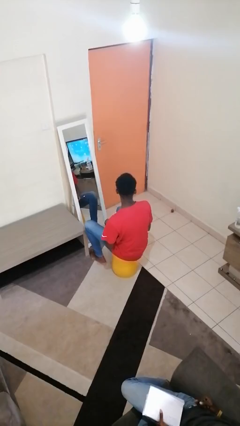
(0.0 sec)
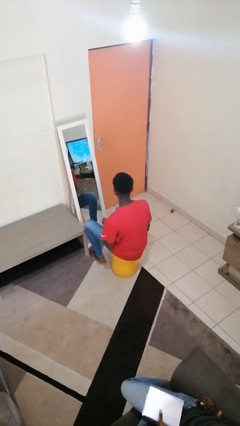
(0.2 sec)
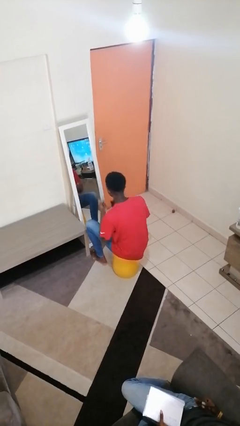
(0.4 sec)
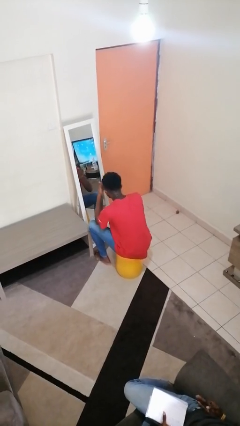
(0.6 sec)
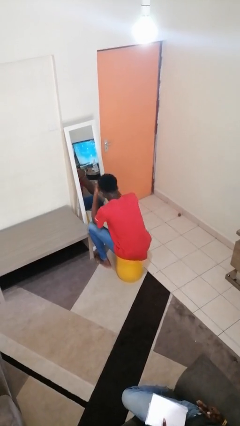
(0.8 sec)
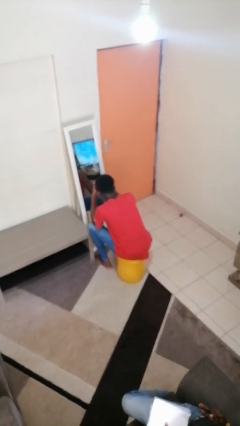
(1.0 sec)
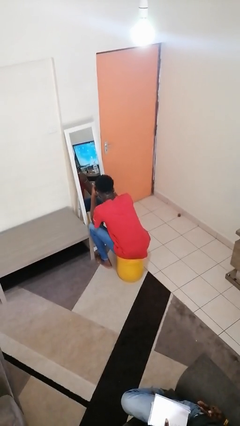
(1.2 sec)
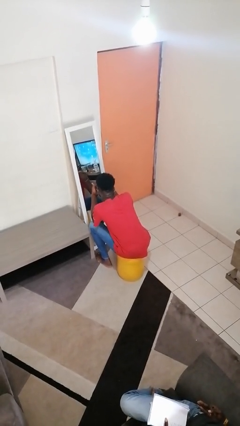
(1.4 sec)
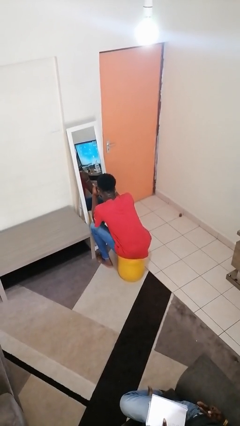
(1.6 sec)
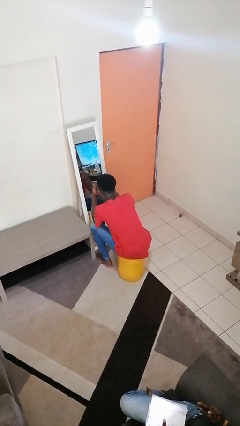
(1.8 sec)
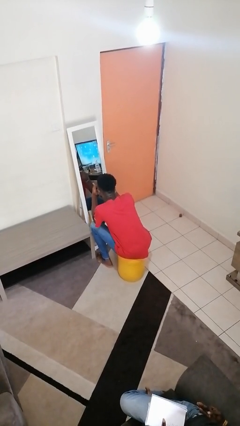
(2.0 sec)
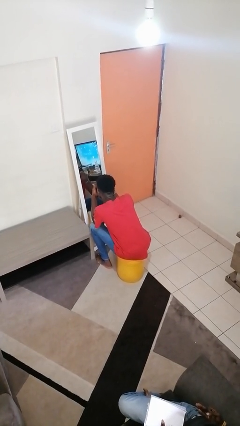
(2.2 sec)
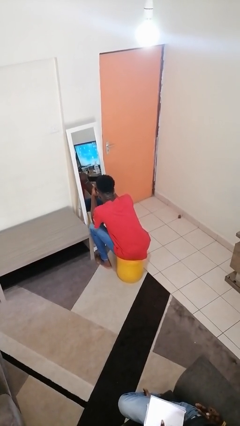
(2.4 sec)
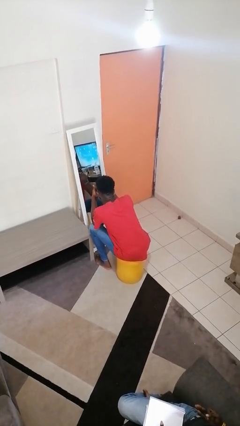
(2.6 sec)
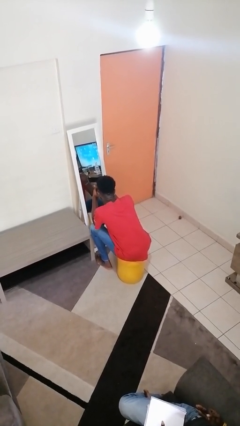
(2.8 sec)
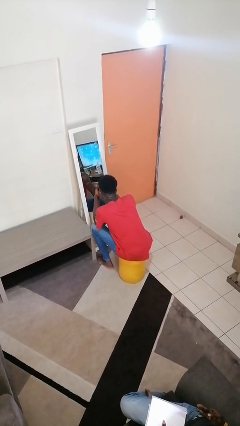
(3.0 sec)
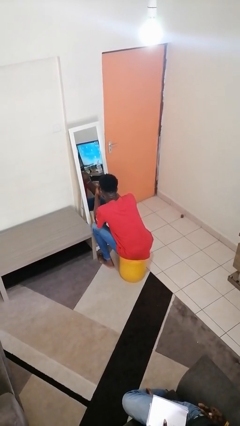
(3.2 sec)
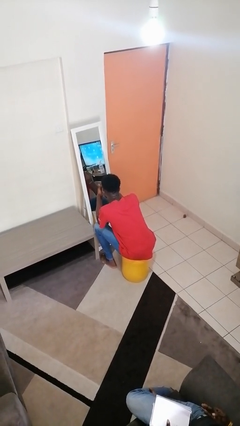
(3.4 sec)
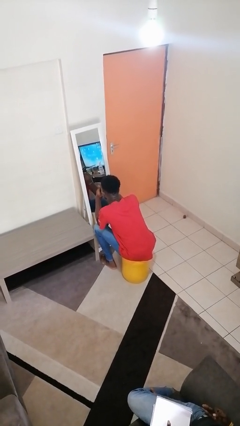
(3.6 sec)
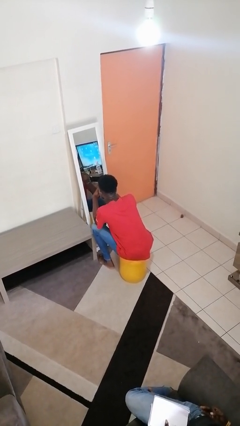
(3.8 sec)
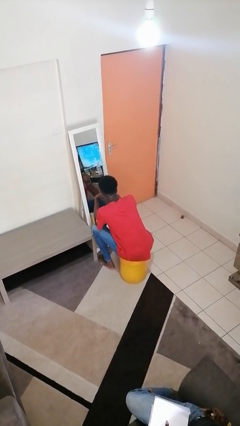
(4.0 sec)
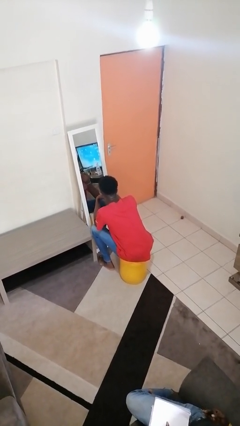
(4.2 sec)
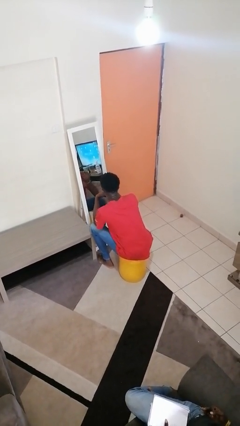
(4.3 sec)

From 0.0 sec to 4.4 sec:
person applies eye makeup

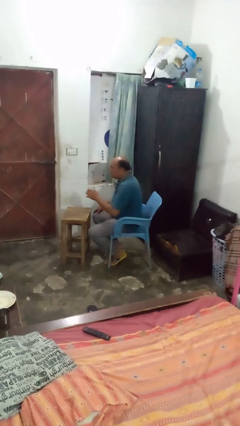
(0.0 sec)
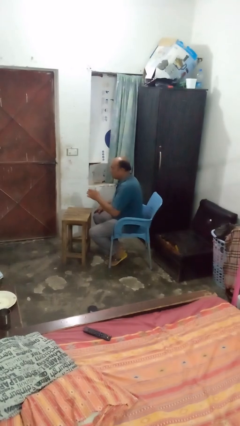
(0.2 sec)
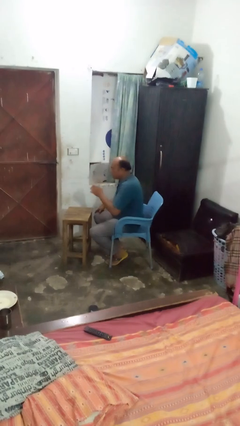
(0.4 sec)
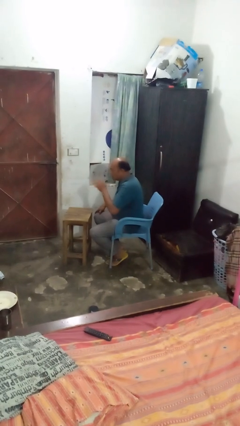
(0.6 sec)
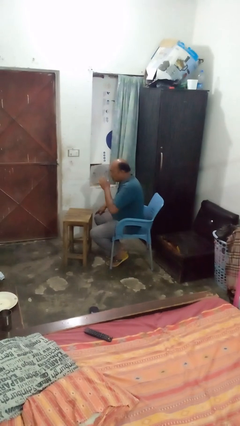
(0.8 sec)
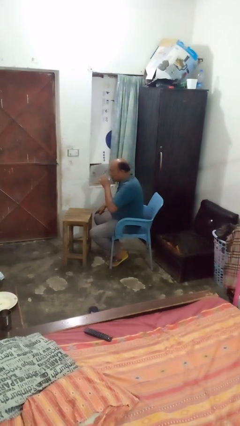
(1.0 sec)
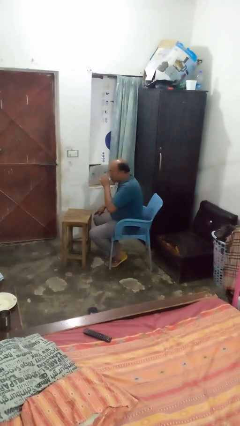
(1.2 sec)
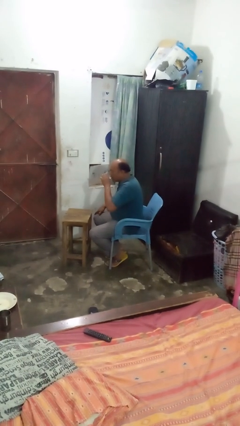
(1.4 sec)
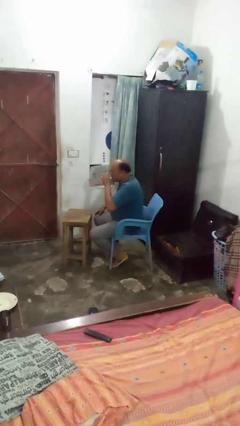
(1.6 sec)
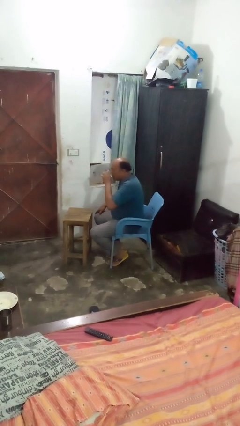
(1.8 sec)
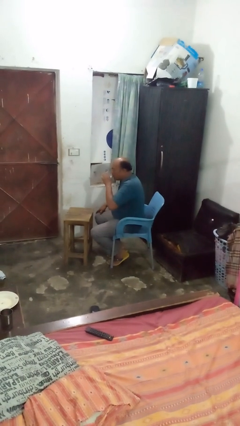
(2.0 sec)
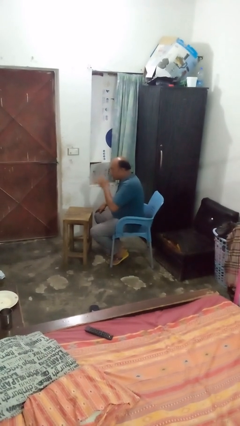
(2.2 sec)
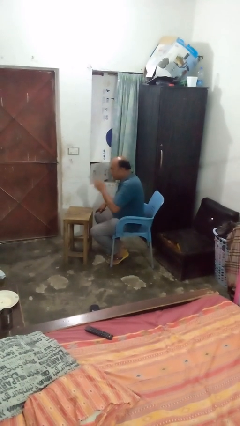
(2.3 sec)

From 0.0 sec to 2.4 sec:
person drinks from shotglass

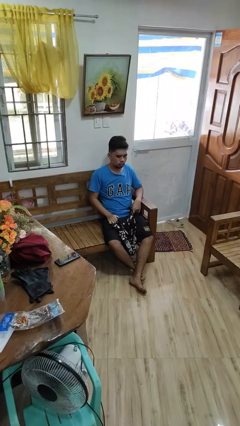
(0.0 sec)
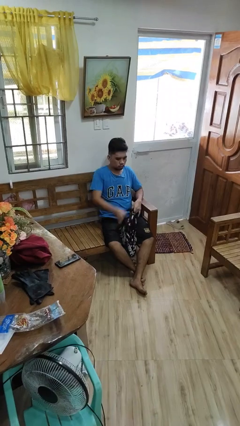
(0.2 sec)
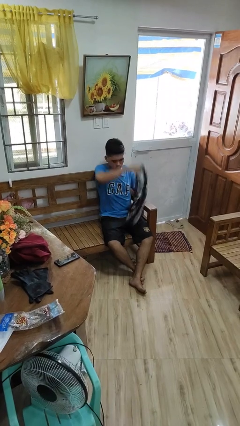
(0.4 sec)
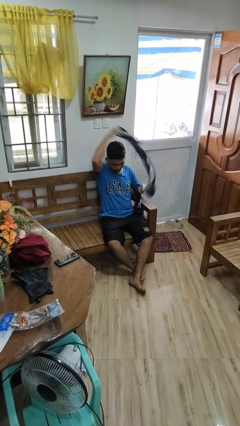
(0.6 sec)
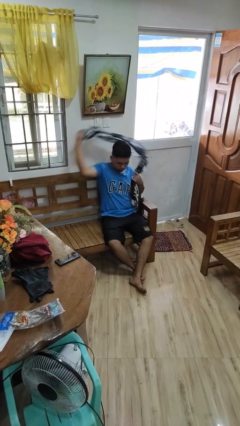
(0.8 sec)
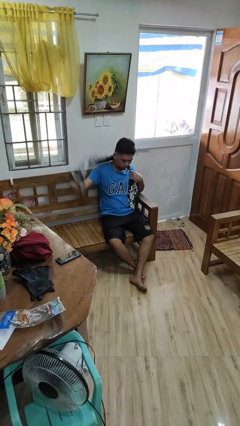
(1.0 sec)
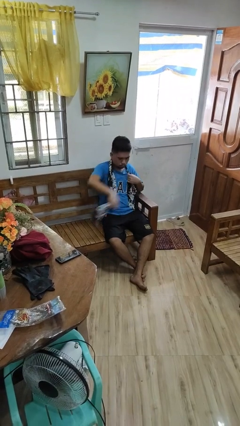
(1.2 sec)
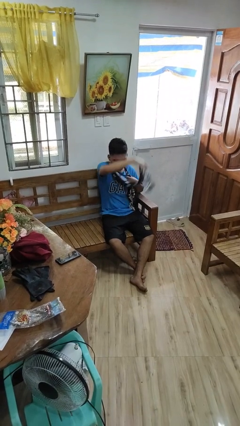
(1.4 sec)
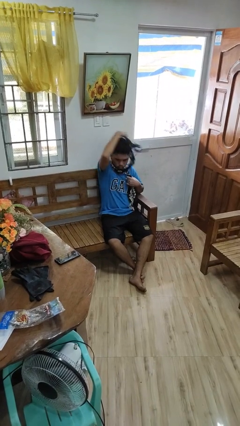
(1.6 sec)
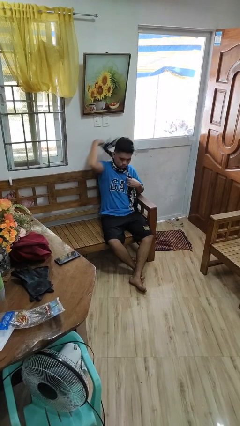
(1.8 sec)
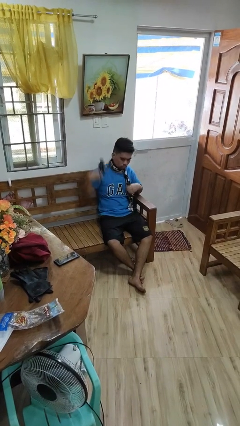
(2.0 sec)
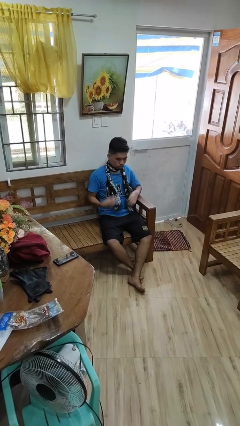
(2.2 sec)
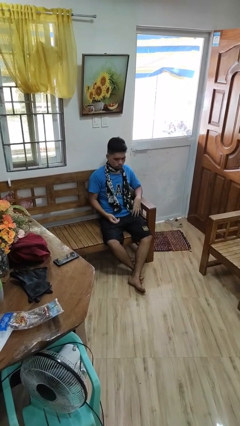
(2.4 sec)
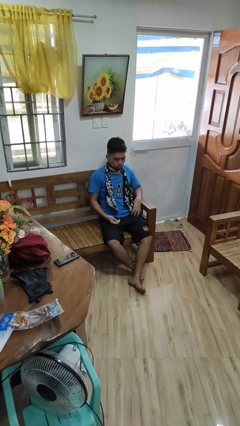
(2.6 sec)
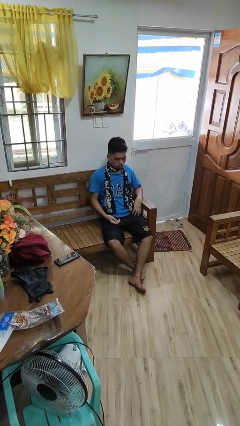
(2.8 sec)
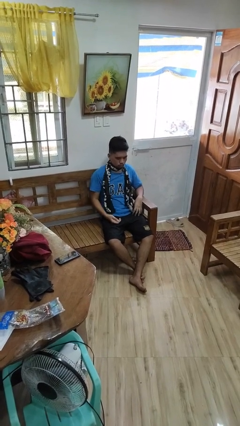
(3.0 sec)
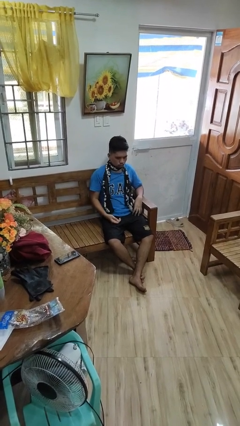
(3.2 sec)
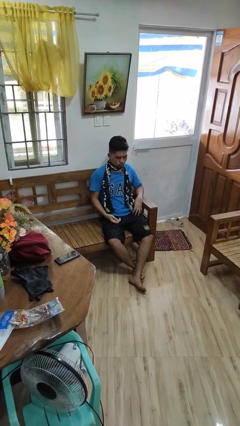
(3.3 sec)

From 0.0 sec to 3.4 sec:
person puts on scarf

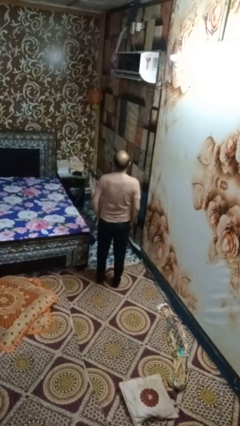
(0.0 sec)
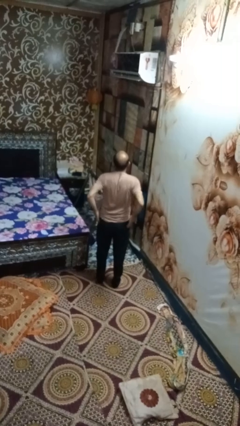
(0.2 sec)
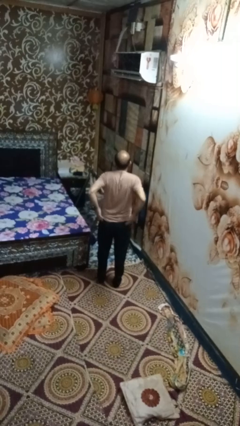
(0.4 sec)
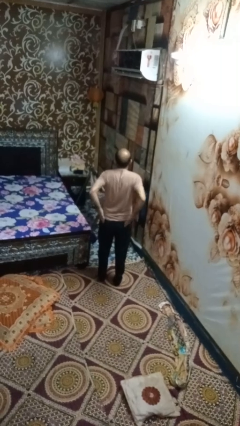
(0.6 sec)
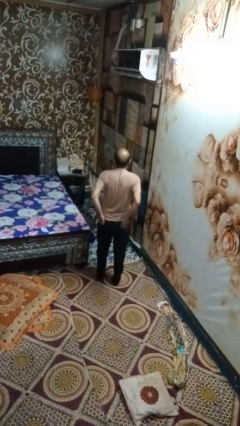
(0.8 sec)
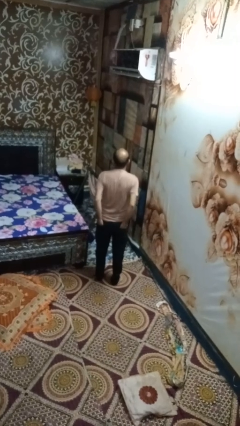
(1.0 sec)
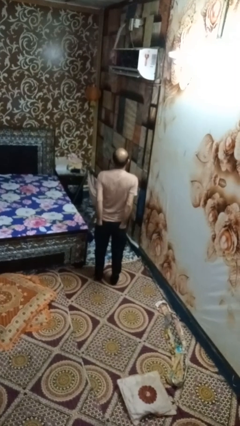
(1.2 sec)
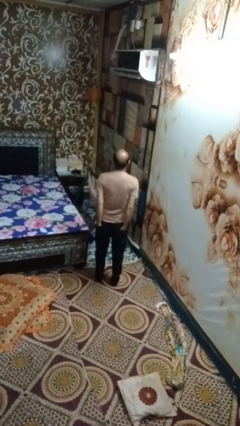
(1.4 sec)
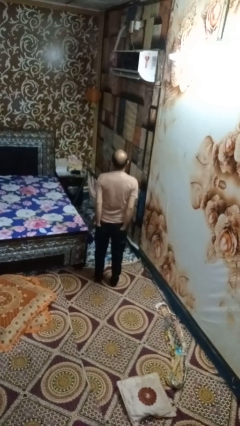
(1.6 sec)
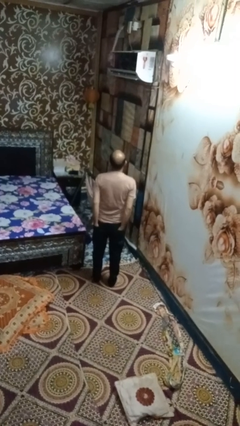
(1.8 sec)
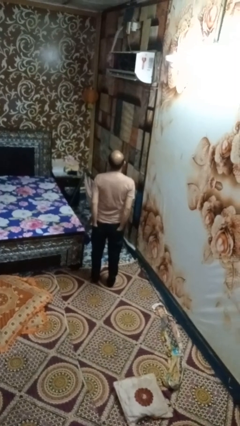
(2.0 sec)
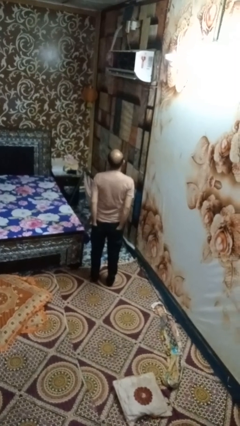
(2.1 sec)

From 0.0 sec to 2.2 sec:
person puts hands in back pockets

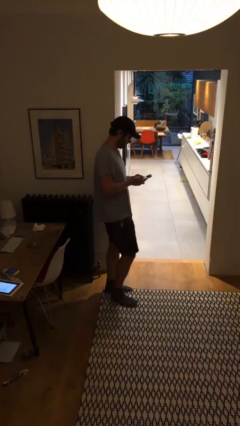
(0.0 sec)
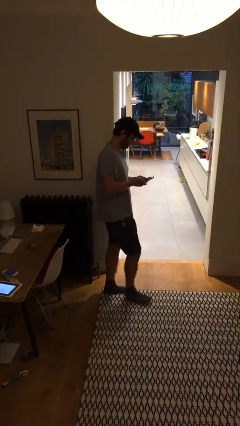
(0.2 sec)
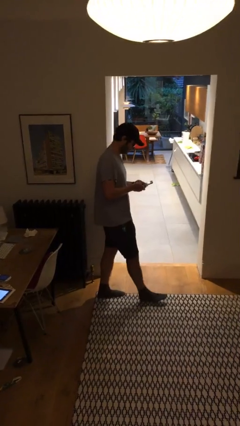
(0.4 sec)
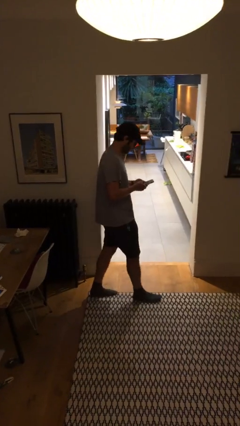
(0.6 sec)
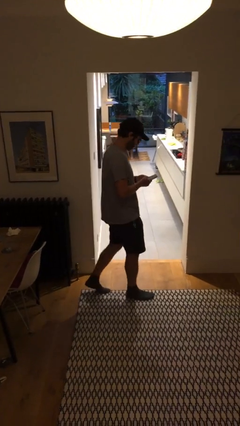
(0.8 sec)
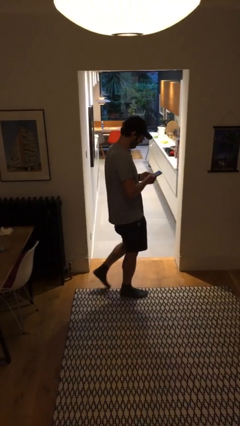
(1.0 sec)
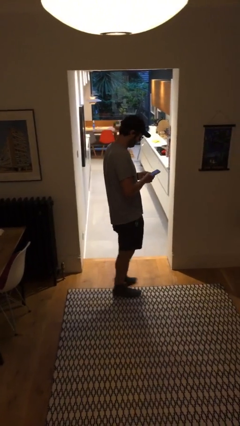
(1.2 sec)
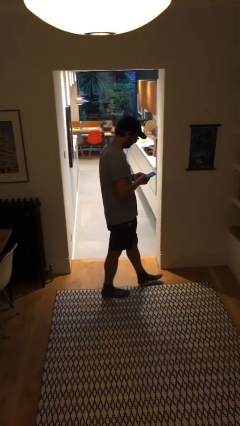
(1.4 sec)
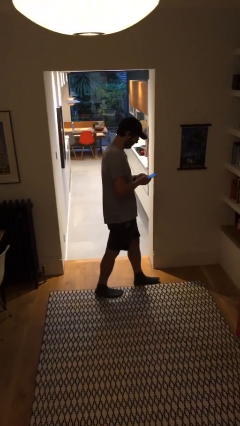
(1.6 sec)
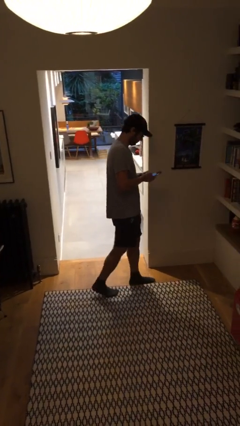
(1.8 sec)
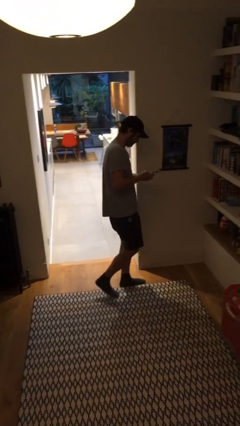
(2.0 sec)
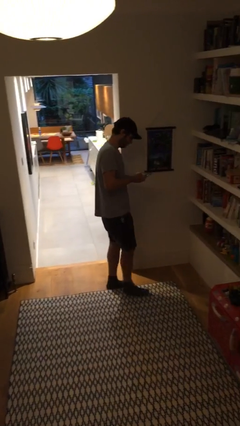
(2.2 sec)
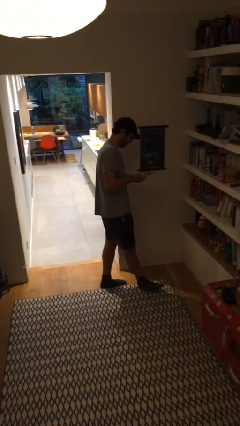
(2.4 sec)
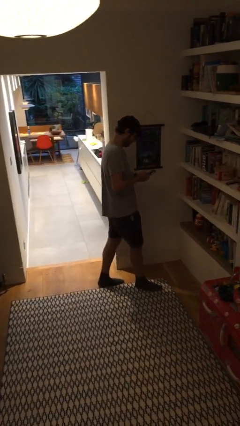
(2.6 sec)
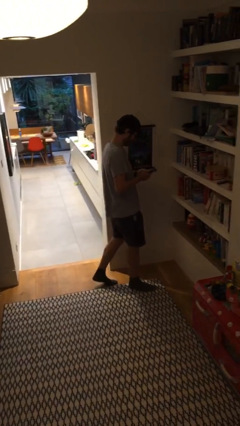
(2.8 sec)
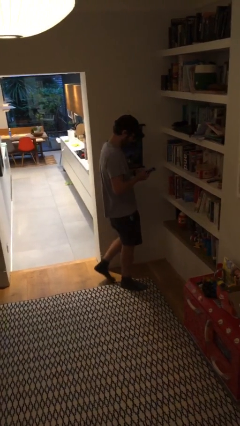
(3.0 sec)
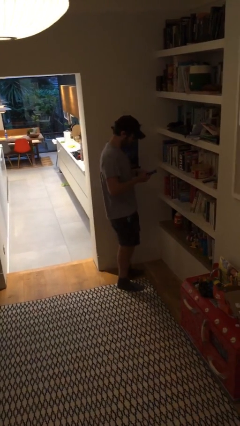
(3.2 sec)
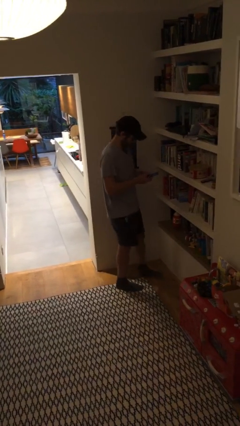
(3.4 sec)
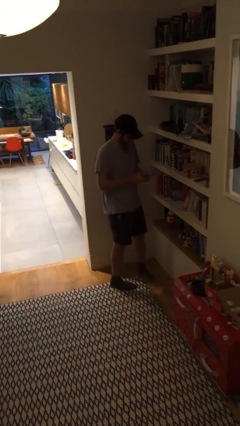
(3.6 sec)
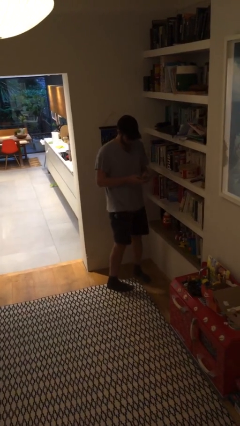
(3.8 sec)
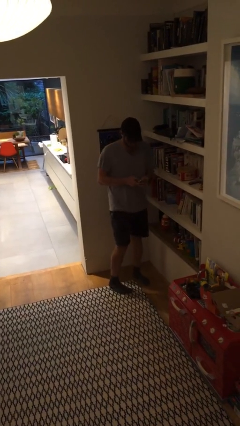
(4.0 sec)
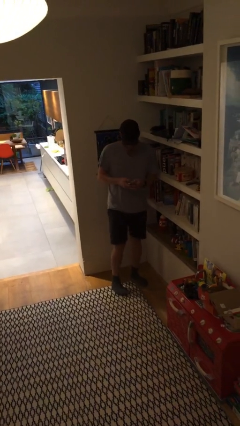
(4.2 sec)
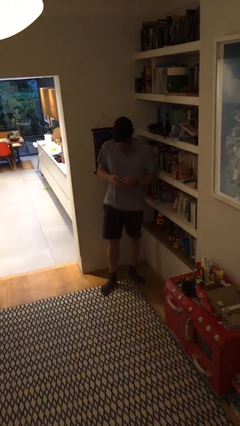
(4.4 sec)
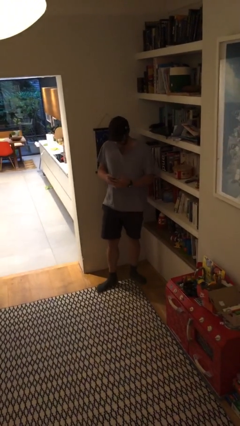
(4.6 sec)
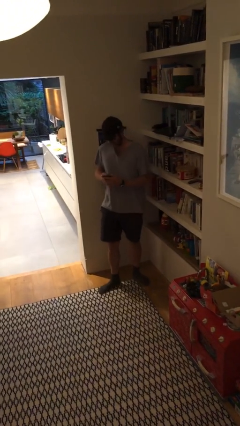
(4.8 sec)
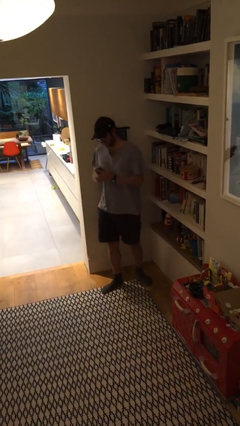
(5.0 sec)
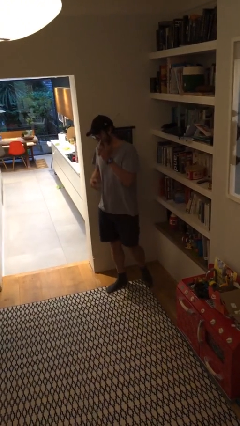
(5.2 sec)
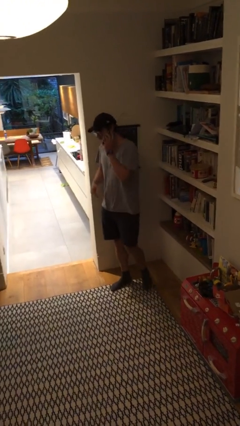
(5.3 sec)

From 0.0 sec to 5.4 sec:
person texts on phone
